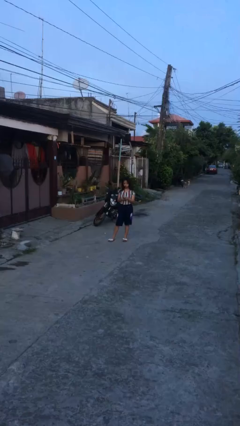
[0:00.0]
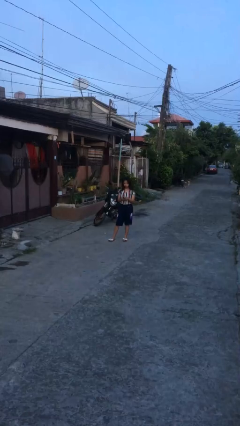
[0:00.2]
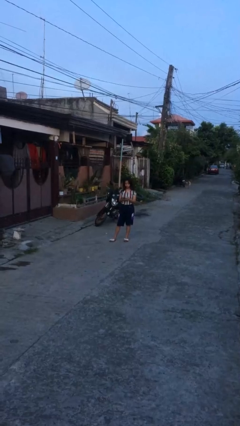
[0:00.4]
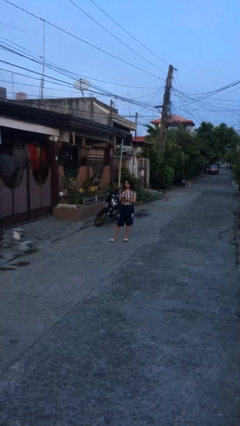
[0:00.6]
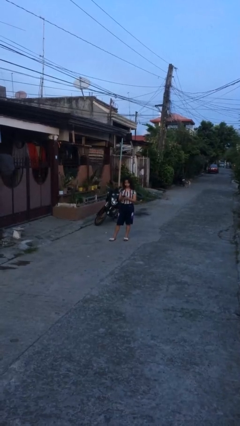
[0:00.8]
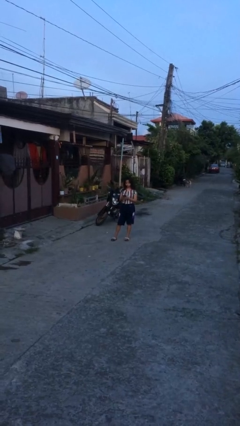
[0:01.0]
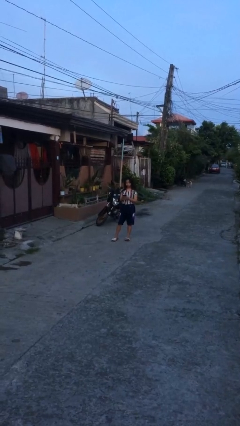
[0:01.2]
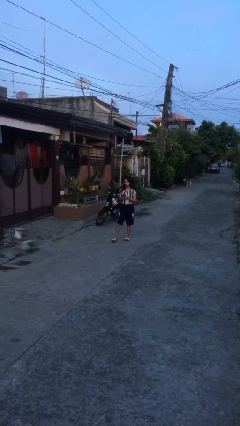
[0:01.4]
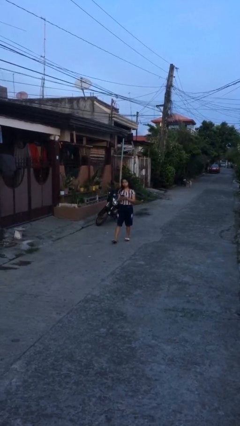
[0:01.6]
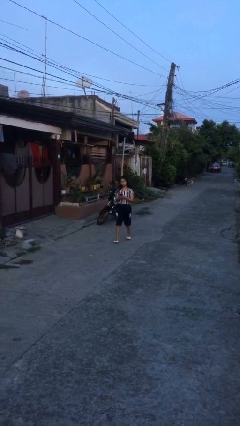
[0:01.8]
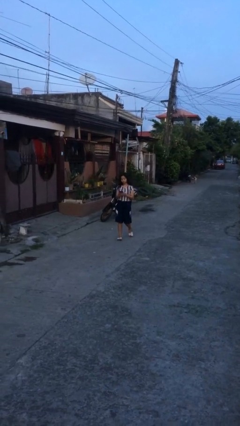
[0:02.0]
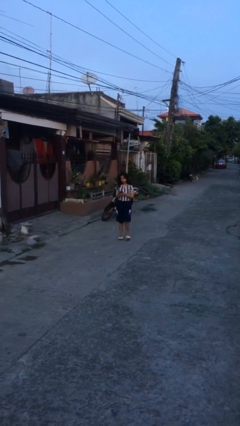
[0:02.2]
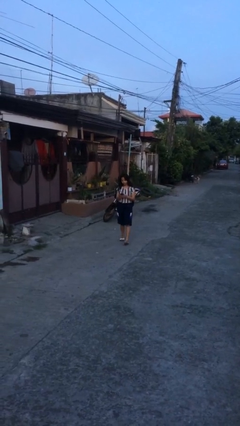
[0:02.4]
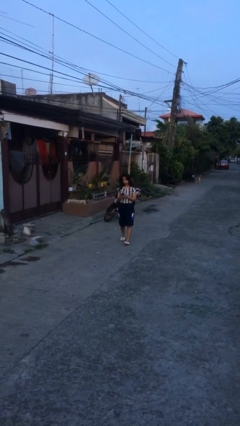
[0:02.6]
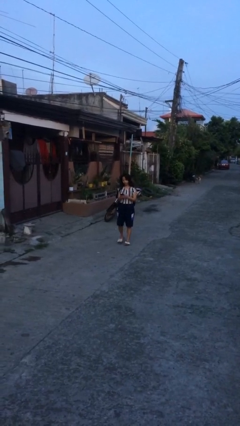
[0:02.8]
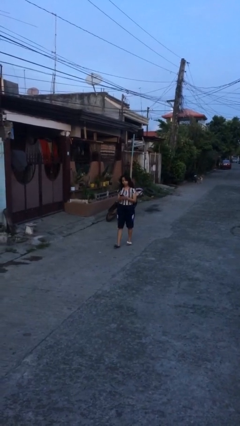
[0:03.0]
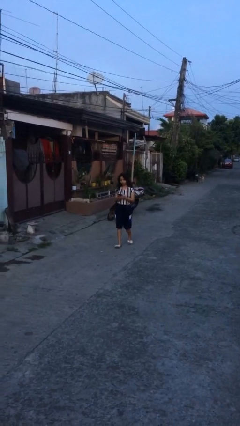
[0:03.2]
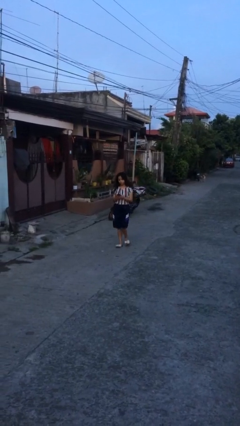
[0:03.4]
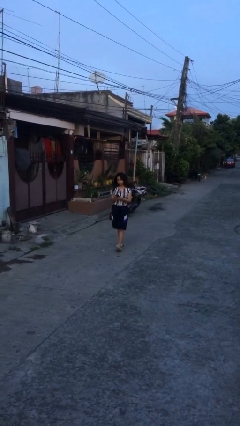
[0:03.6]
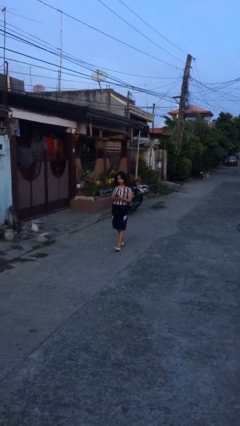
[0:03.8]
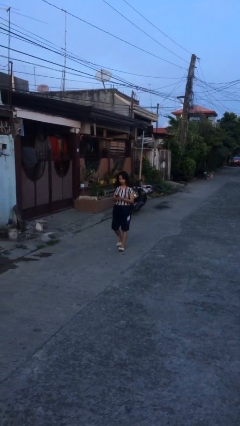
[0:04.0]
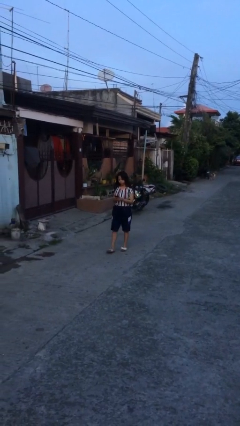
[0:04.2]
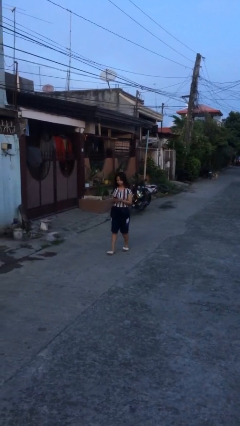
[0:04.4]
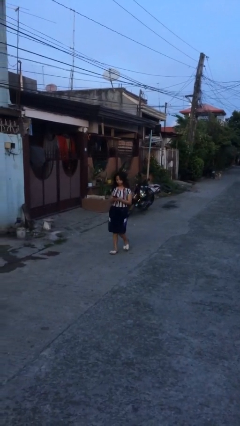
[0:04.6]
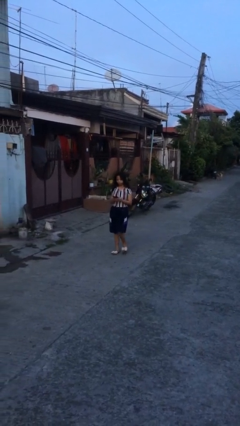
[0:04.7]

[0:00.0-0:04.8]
person texts on phone

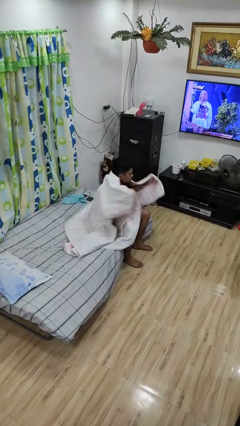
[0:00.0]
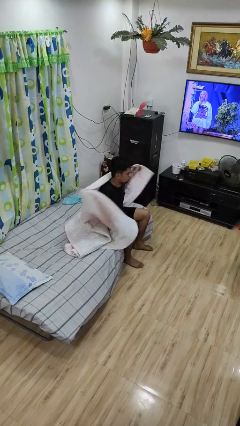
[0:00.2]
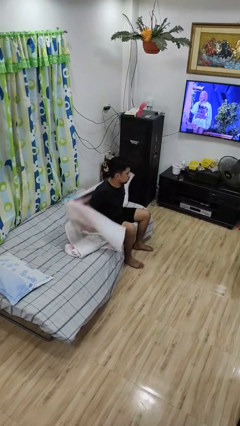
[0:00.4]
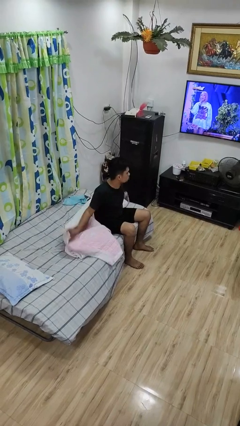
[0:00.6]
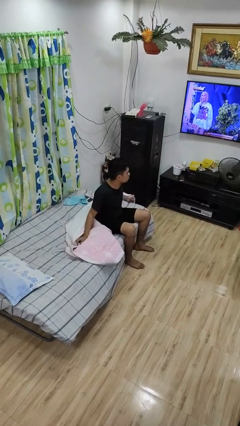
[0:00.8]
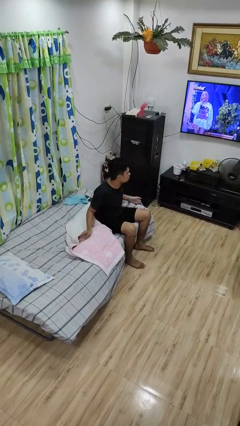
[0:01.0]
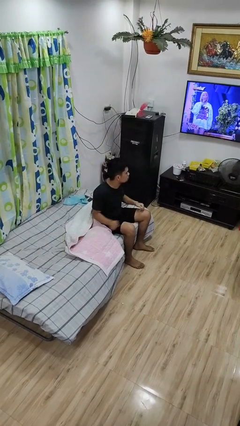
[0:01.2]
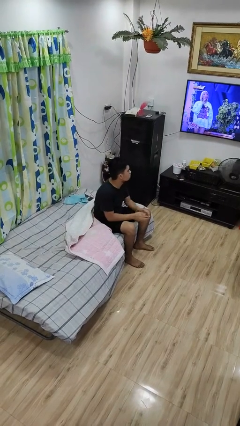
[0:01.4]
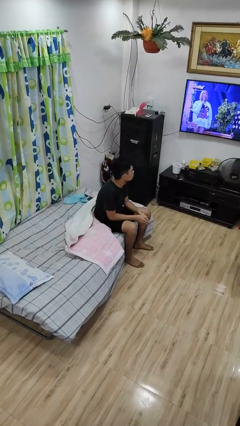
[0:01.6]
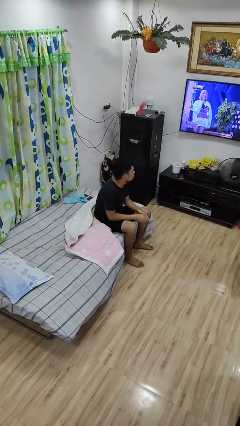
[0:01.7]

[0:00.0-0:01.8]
person uncovers with bedsheets

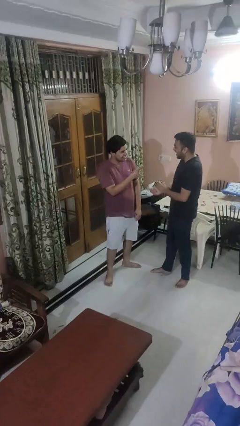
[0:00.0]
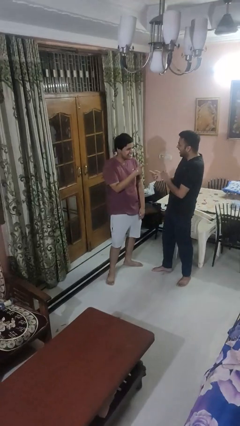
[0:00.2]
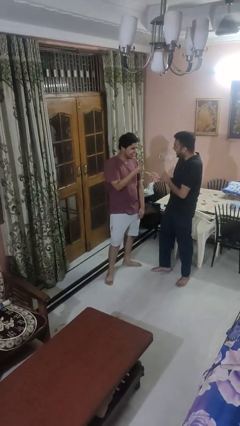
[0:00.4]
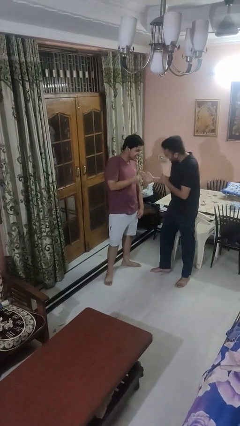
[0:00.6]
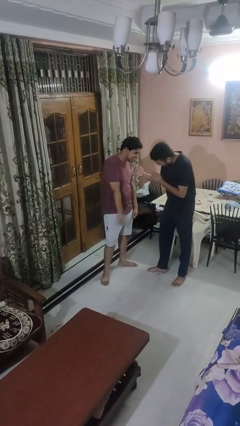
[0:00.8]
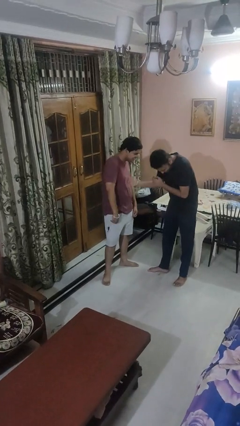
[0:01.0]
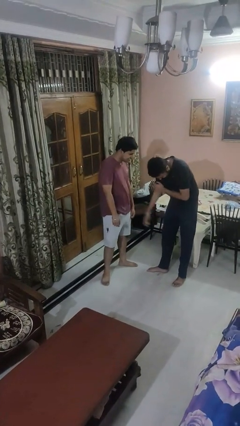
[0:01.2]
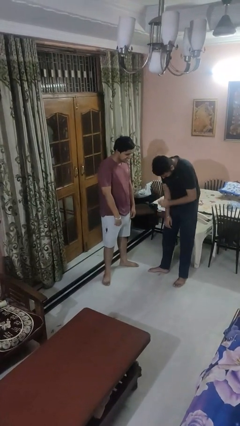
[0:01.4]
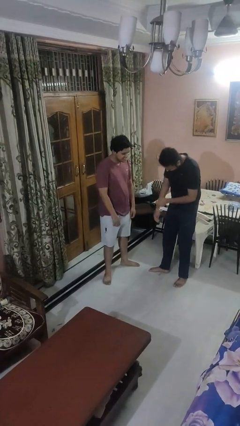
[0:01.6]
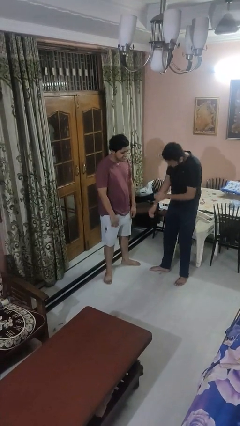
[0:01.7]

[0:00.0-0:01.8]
person laughs with person

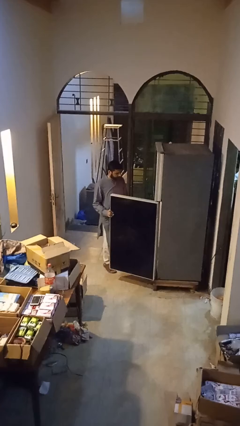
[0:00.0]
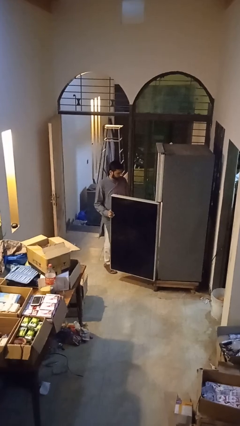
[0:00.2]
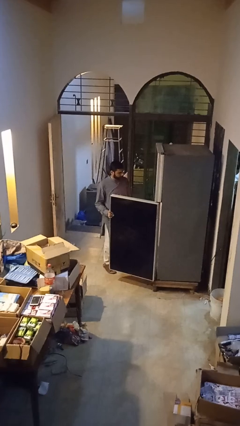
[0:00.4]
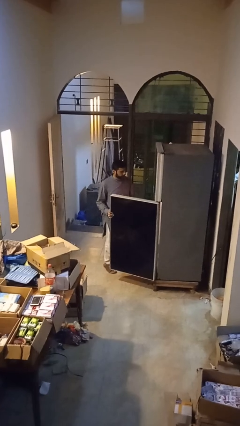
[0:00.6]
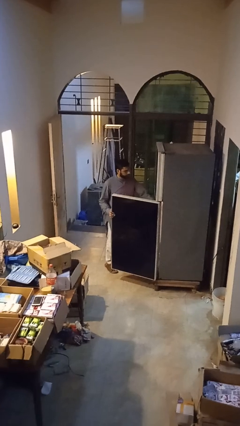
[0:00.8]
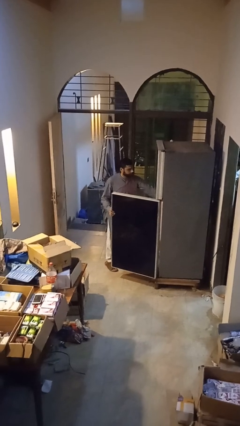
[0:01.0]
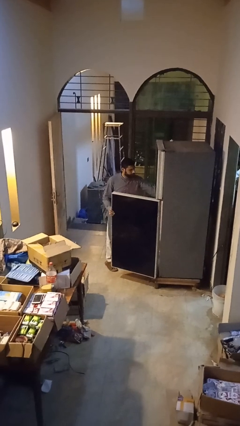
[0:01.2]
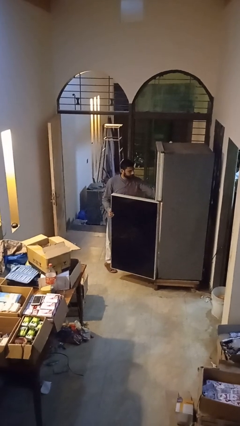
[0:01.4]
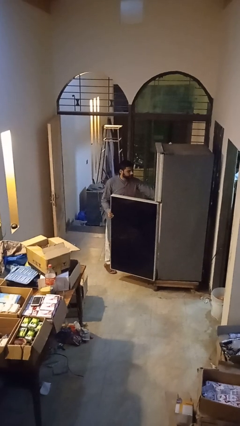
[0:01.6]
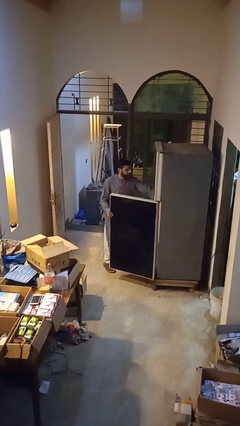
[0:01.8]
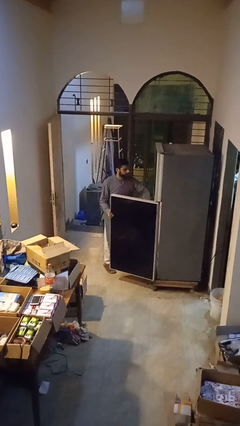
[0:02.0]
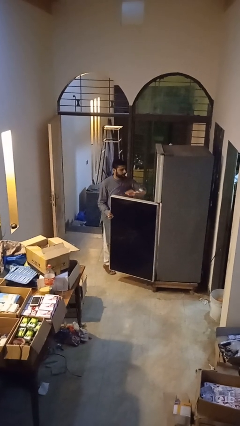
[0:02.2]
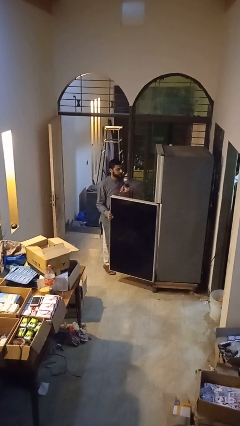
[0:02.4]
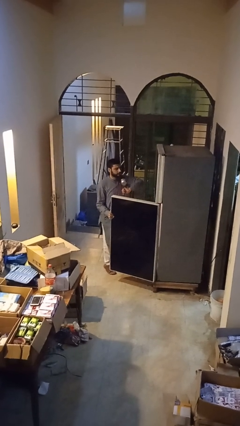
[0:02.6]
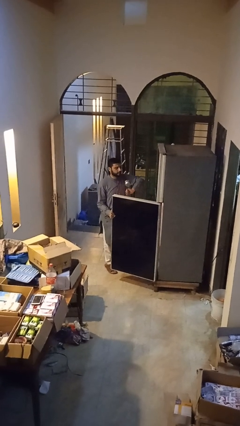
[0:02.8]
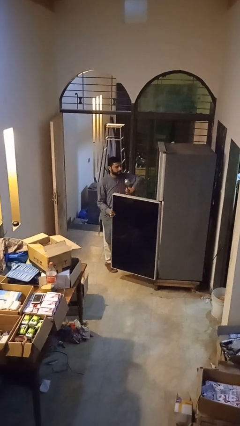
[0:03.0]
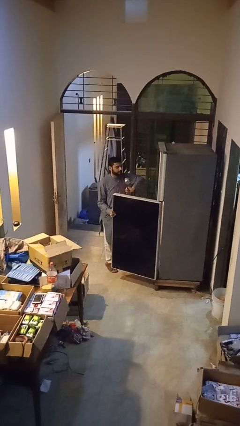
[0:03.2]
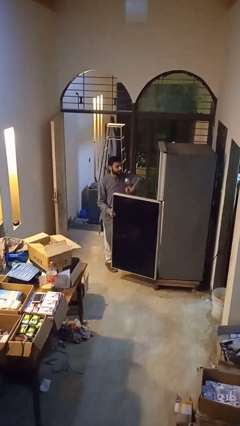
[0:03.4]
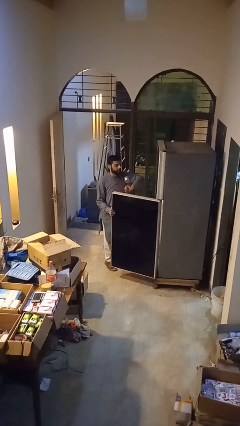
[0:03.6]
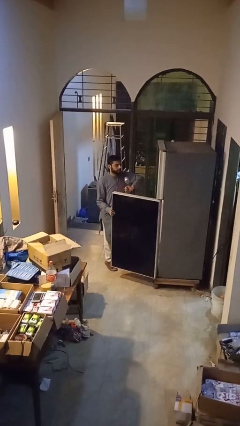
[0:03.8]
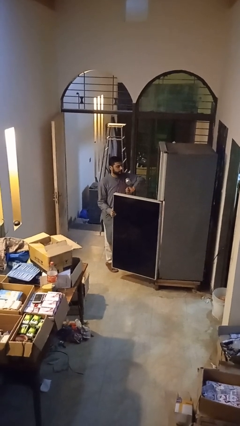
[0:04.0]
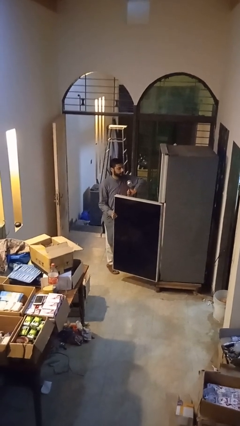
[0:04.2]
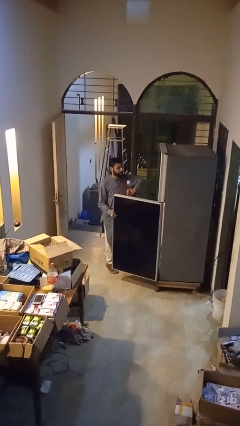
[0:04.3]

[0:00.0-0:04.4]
person puts object into refrigerator

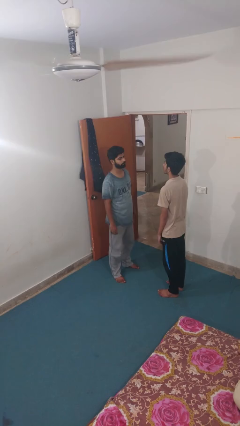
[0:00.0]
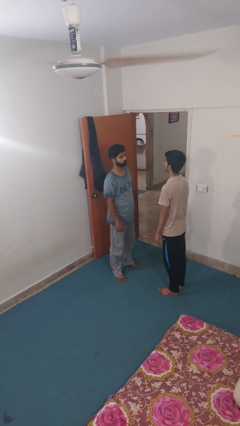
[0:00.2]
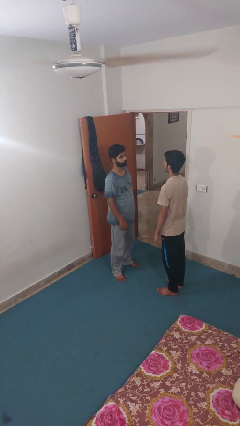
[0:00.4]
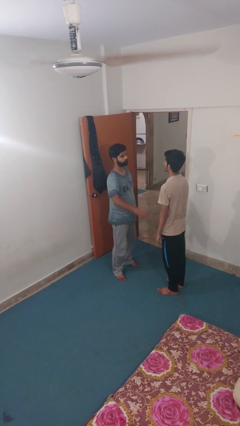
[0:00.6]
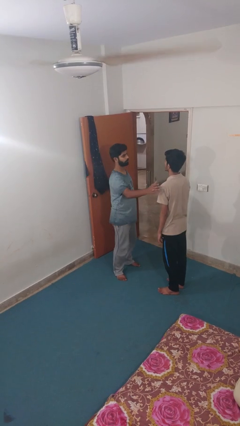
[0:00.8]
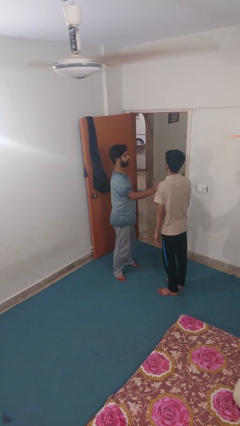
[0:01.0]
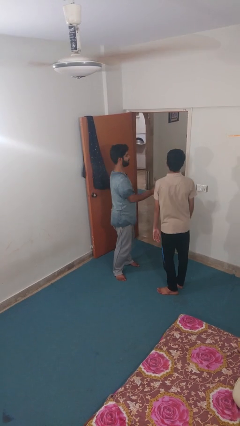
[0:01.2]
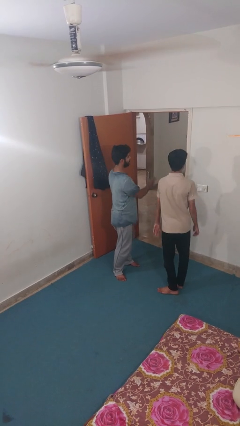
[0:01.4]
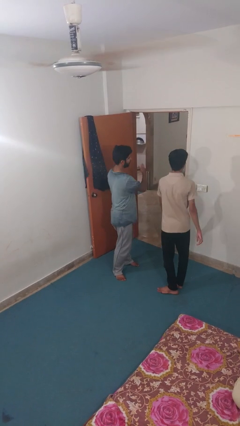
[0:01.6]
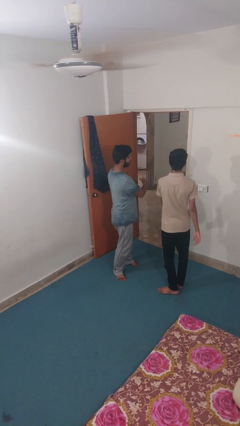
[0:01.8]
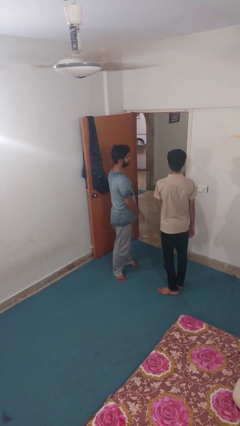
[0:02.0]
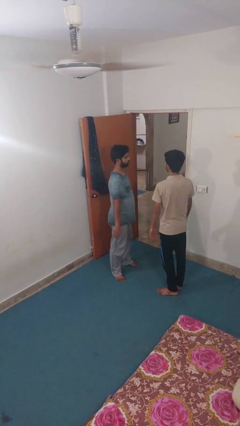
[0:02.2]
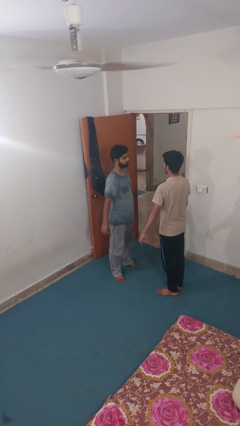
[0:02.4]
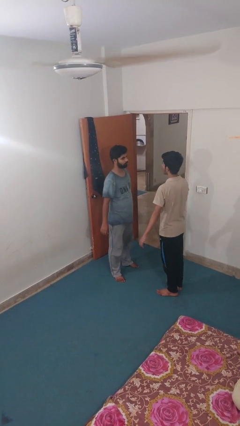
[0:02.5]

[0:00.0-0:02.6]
person shoves person

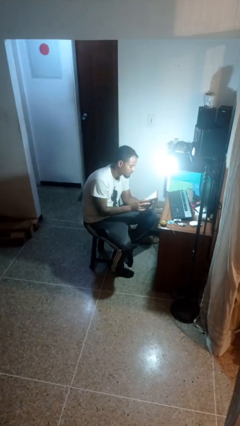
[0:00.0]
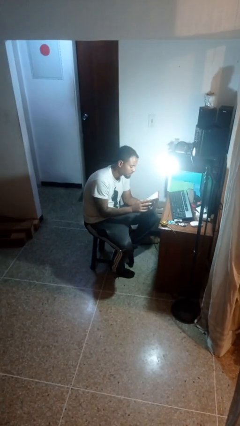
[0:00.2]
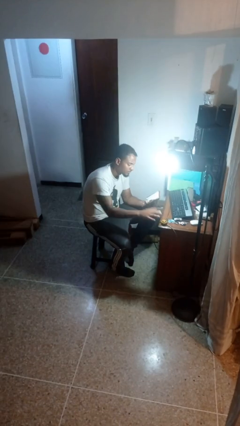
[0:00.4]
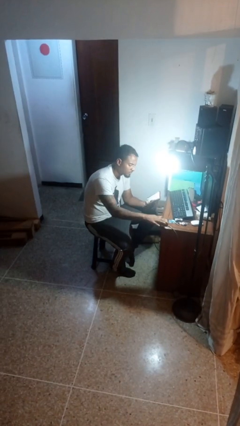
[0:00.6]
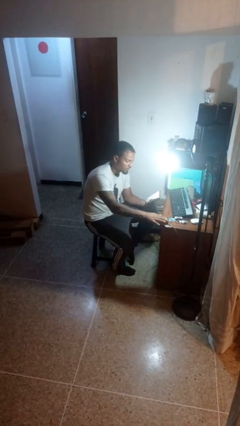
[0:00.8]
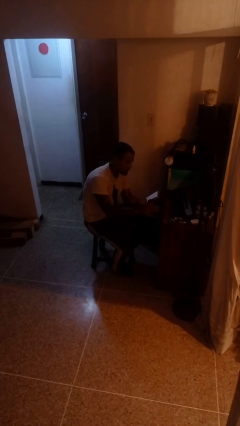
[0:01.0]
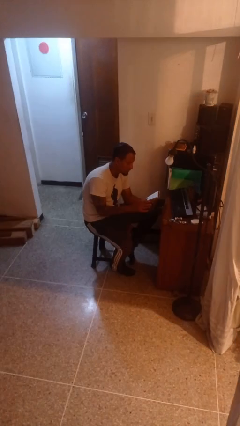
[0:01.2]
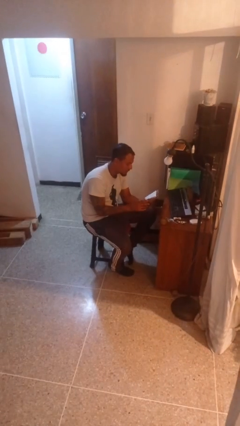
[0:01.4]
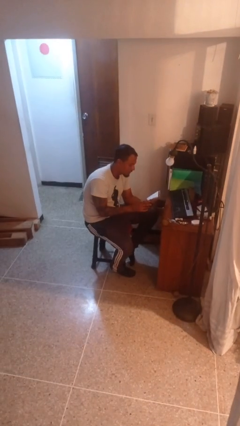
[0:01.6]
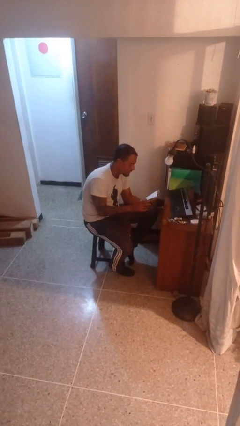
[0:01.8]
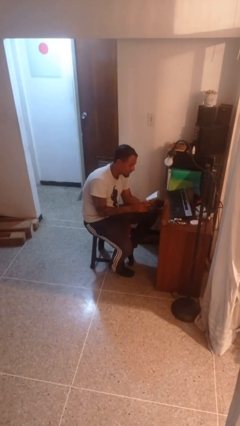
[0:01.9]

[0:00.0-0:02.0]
person turns off lamp
